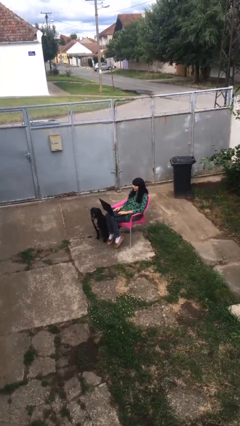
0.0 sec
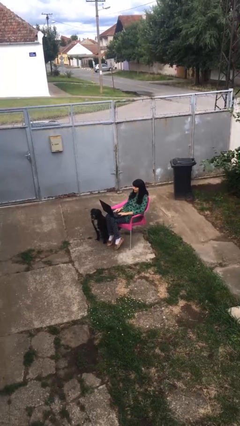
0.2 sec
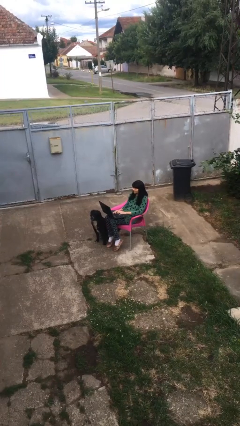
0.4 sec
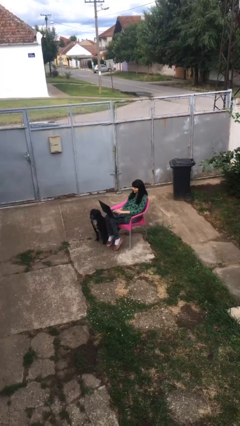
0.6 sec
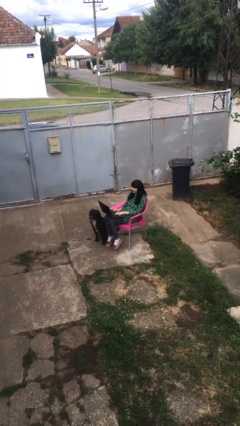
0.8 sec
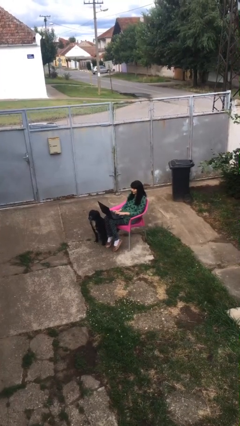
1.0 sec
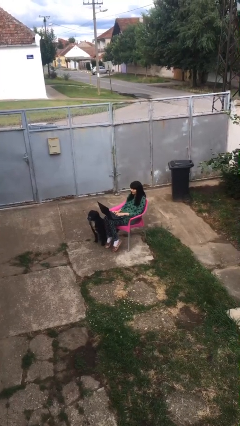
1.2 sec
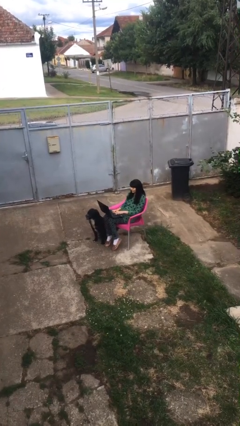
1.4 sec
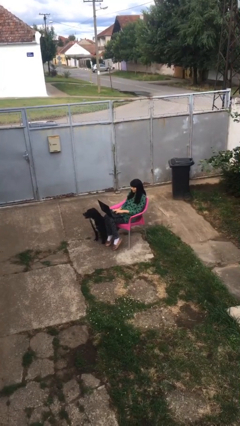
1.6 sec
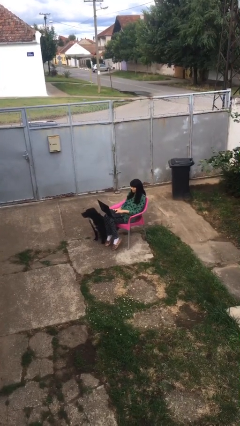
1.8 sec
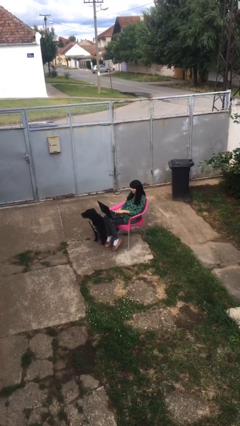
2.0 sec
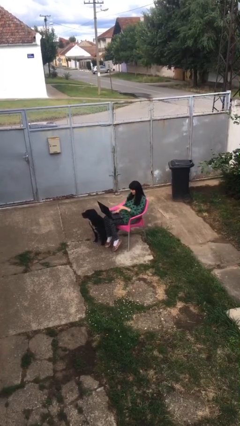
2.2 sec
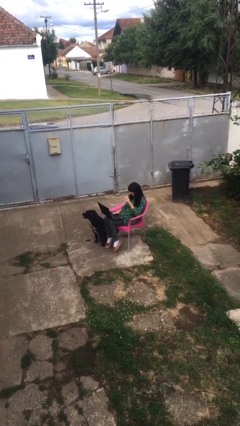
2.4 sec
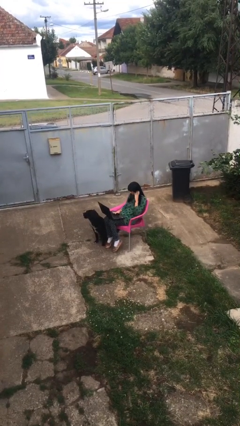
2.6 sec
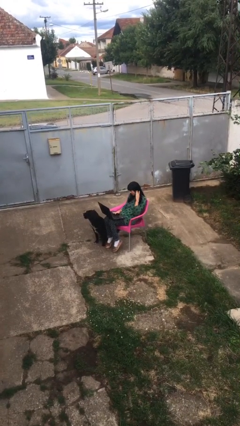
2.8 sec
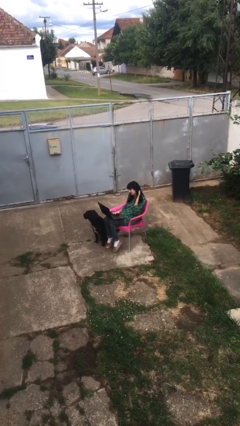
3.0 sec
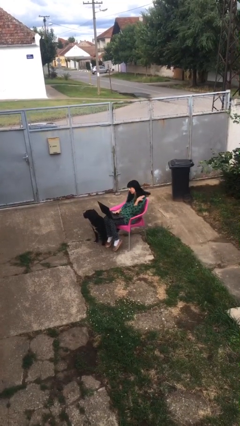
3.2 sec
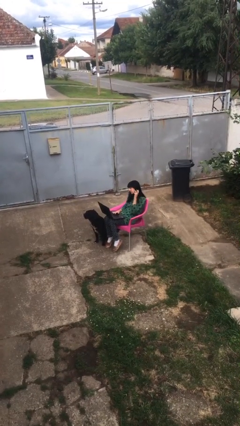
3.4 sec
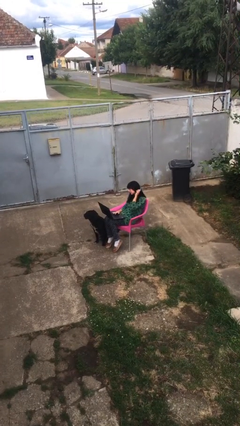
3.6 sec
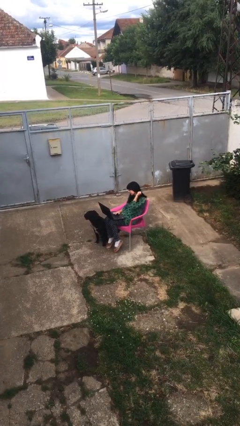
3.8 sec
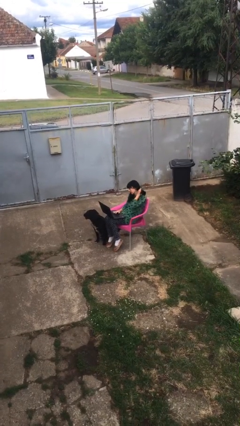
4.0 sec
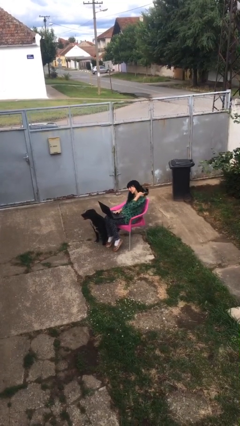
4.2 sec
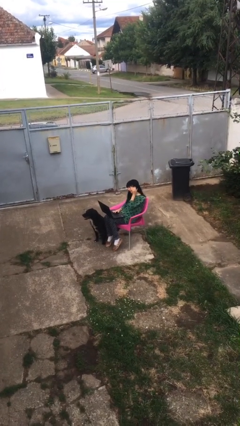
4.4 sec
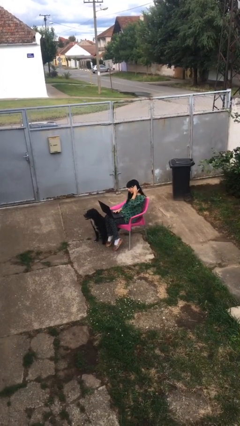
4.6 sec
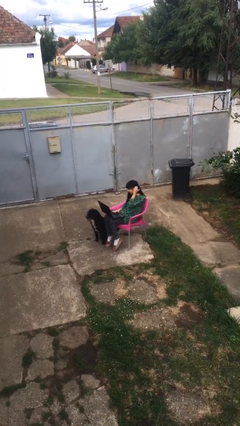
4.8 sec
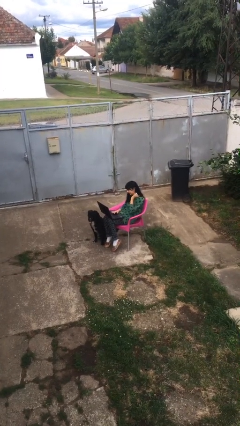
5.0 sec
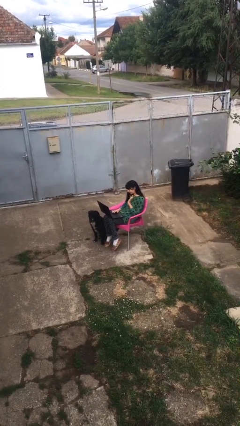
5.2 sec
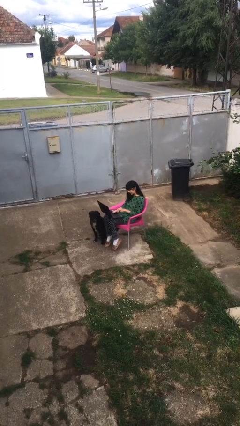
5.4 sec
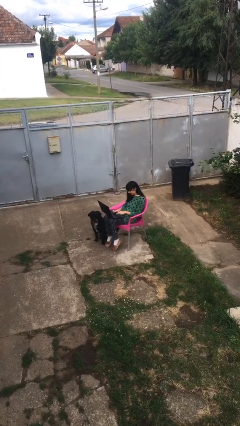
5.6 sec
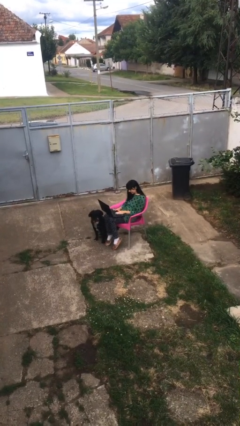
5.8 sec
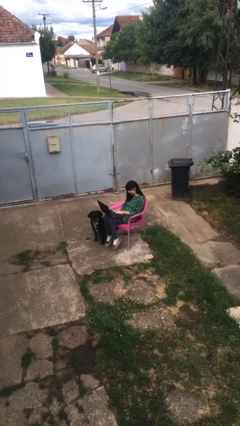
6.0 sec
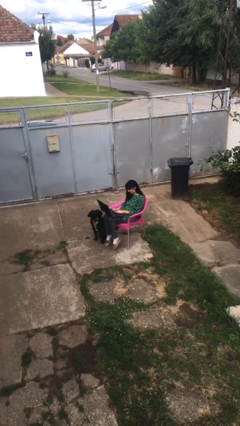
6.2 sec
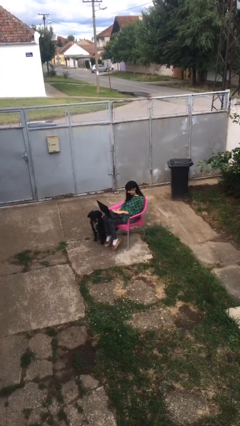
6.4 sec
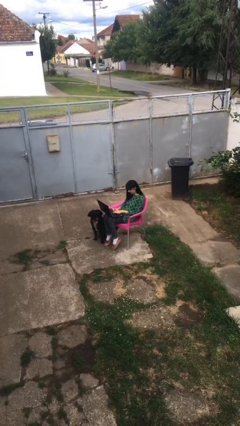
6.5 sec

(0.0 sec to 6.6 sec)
person interacts with laptop

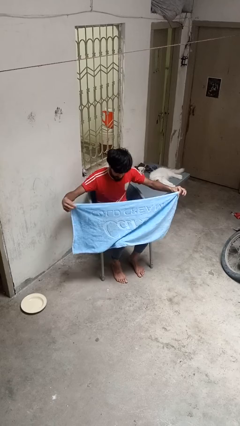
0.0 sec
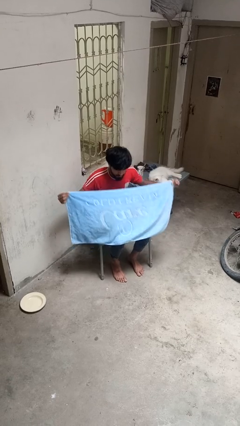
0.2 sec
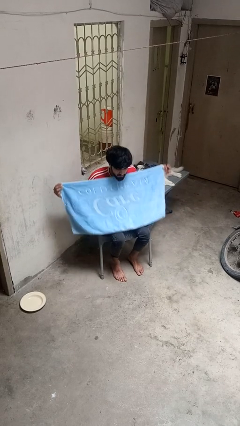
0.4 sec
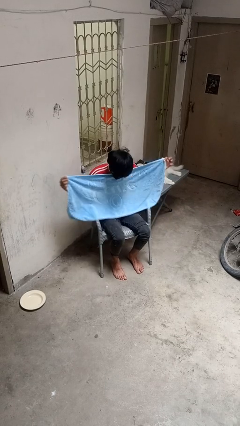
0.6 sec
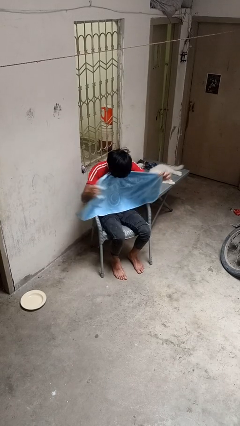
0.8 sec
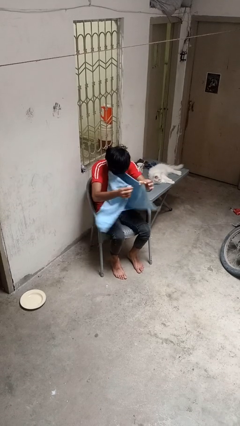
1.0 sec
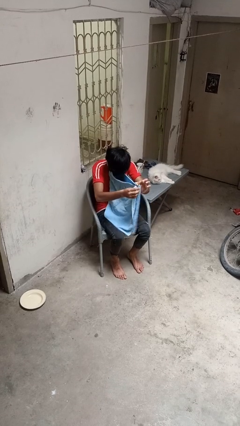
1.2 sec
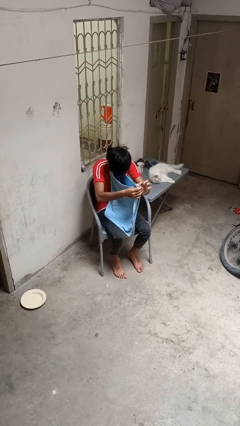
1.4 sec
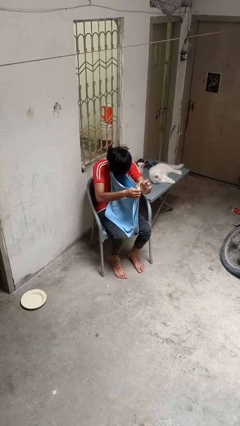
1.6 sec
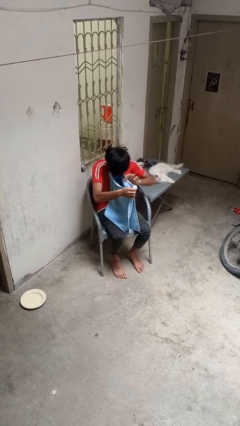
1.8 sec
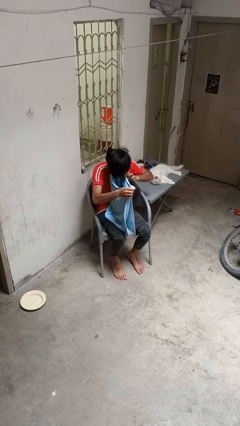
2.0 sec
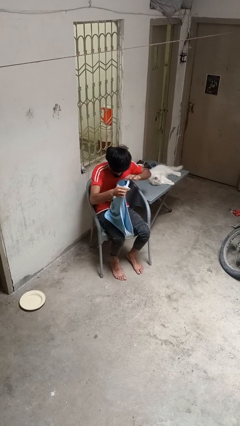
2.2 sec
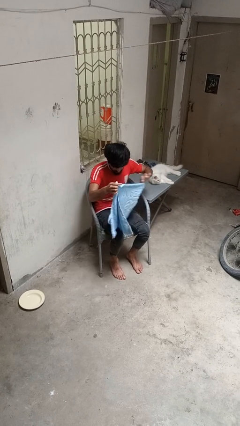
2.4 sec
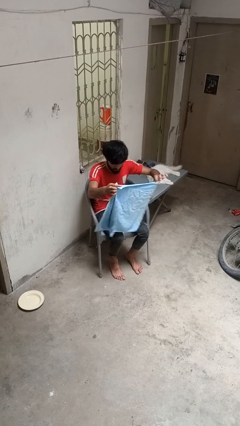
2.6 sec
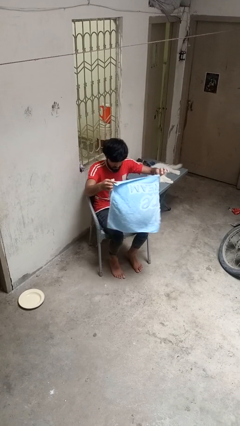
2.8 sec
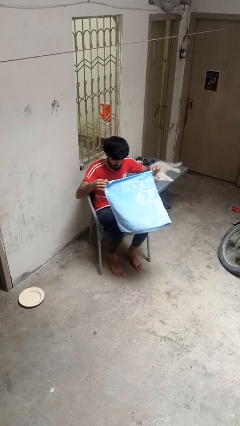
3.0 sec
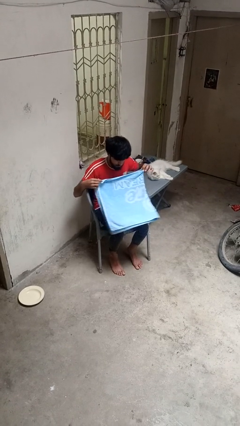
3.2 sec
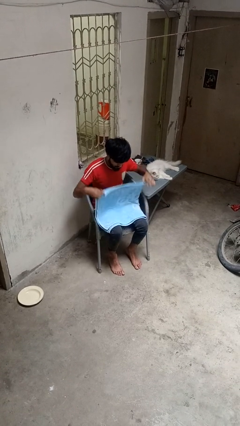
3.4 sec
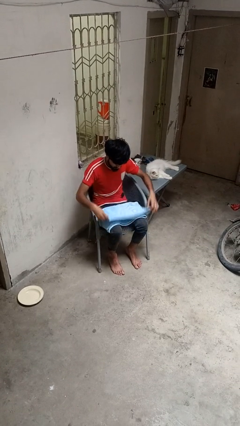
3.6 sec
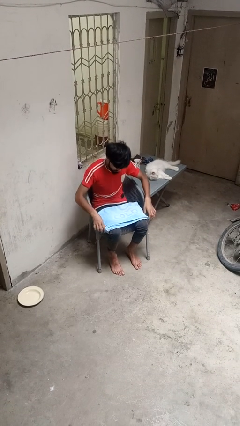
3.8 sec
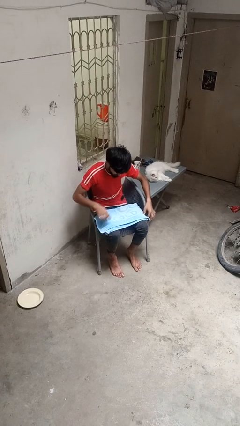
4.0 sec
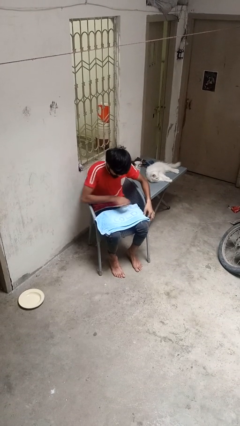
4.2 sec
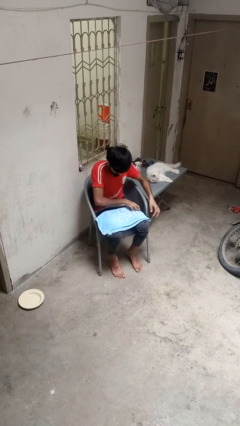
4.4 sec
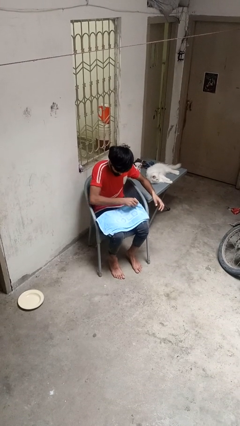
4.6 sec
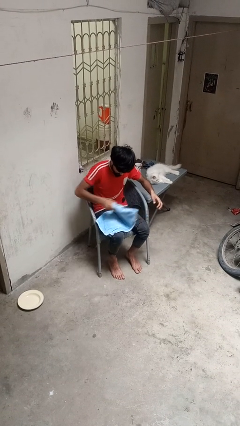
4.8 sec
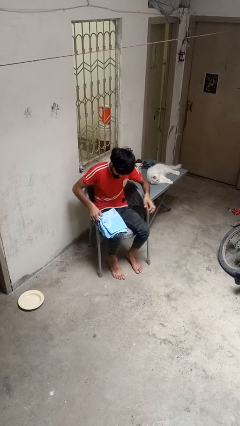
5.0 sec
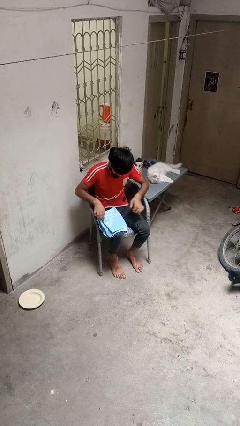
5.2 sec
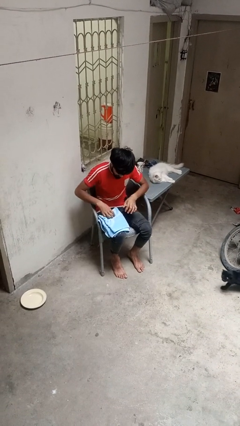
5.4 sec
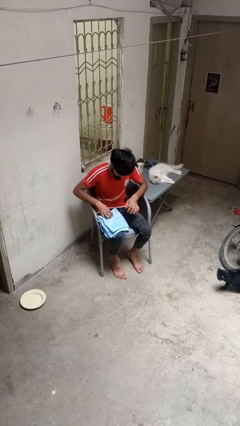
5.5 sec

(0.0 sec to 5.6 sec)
person folds towel

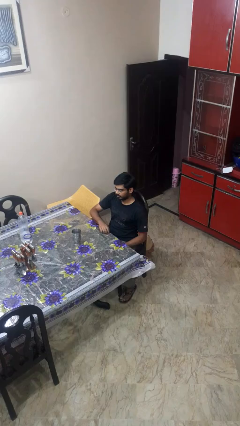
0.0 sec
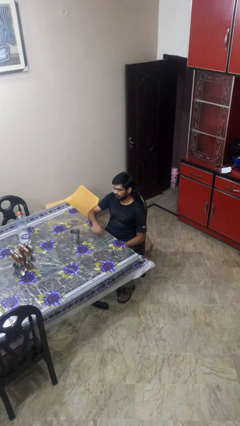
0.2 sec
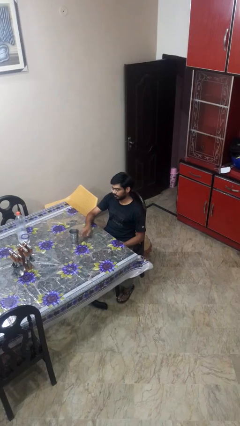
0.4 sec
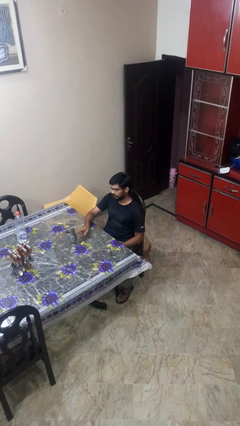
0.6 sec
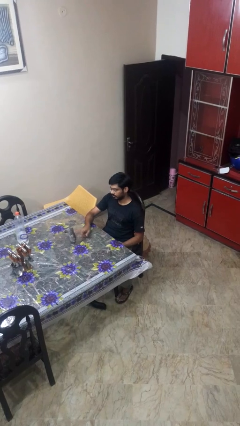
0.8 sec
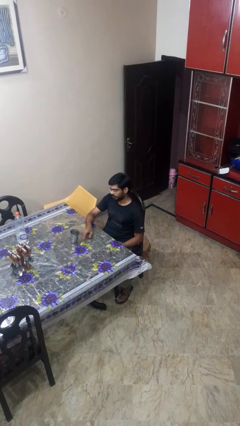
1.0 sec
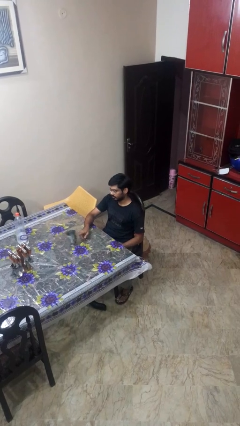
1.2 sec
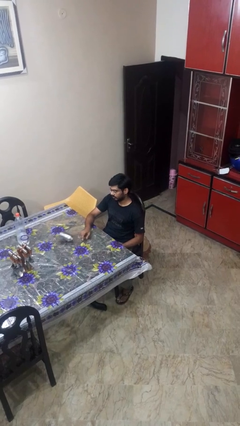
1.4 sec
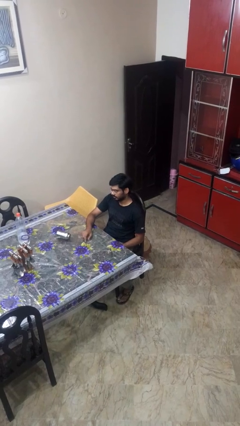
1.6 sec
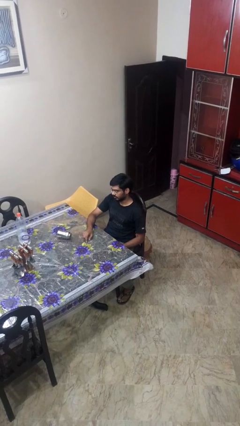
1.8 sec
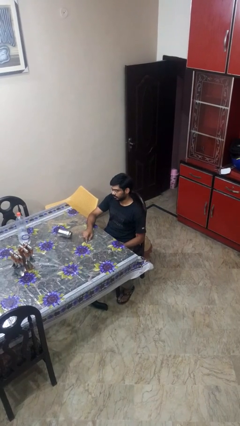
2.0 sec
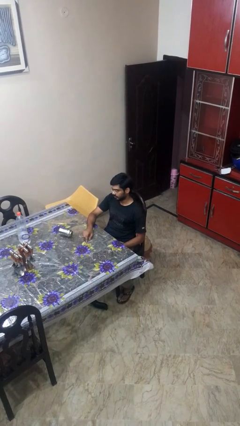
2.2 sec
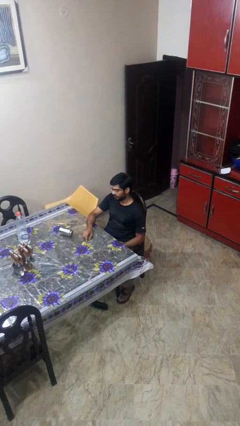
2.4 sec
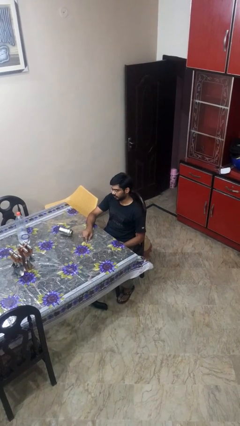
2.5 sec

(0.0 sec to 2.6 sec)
person knocks over glass

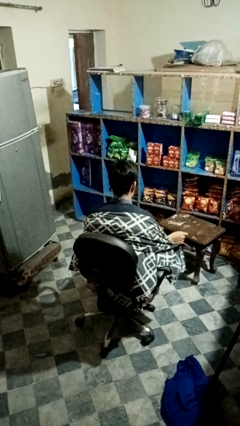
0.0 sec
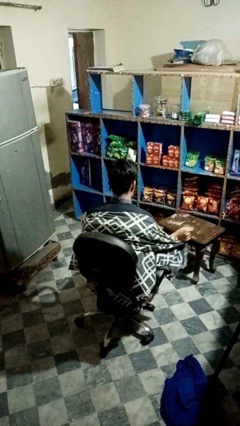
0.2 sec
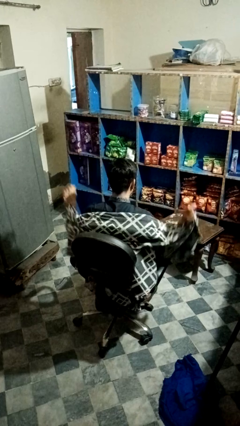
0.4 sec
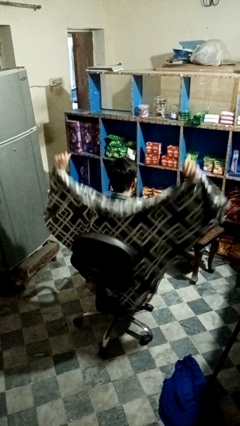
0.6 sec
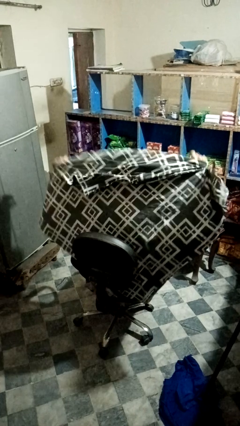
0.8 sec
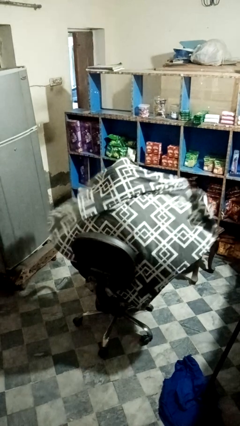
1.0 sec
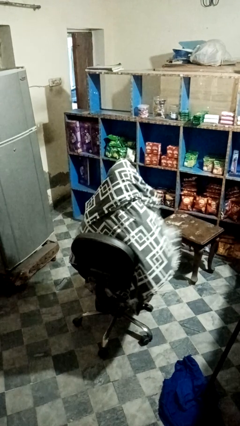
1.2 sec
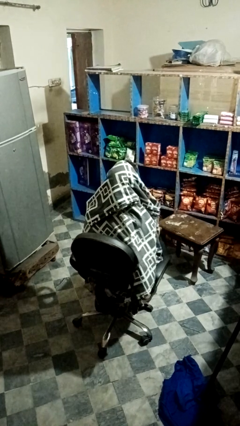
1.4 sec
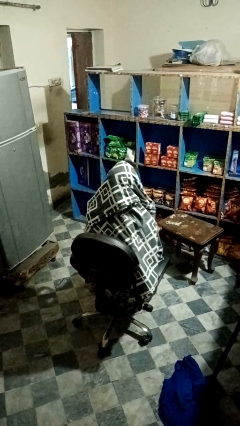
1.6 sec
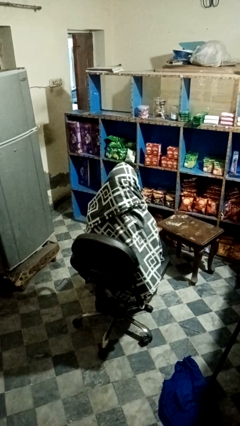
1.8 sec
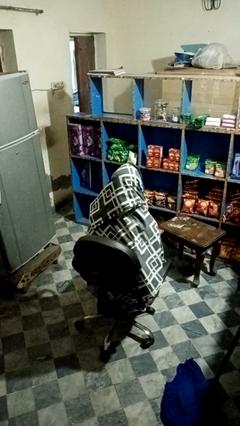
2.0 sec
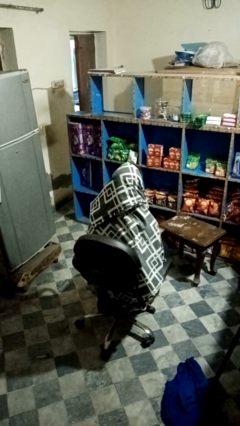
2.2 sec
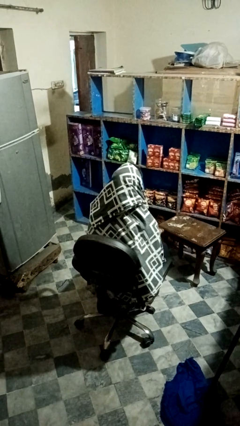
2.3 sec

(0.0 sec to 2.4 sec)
person covers with blanket

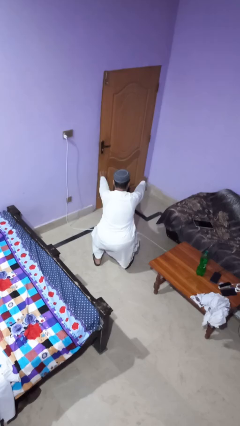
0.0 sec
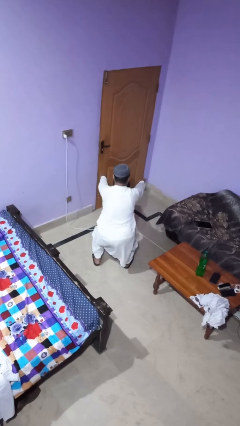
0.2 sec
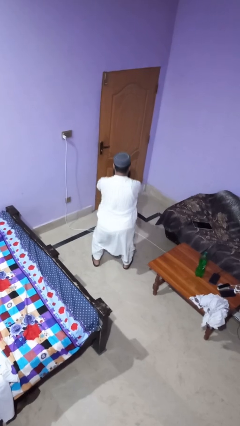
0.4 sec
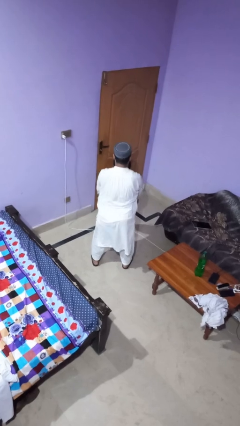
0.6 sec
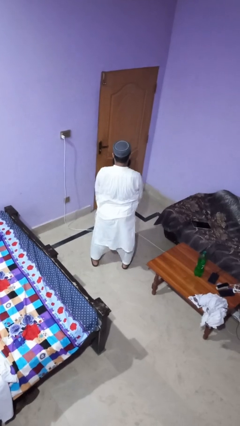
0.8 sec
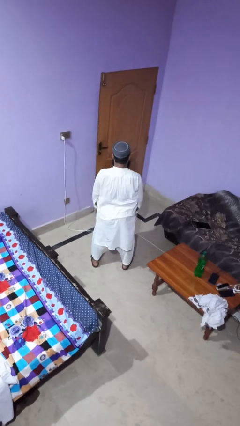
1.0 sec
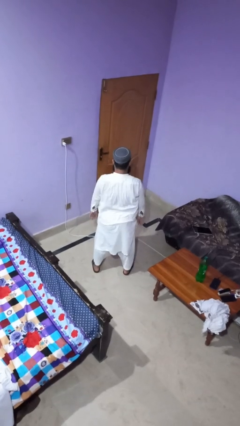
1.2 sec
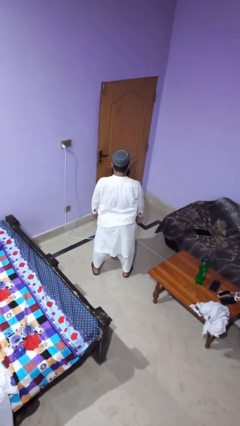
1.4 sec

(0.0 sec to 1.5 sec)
person stands up
